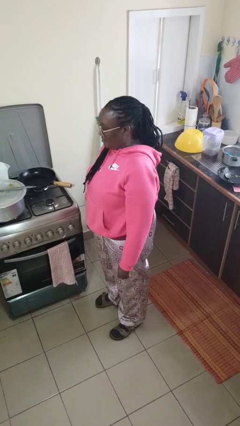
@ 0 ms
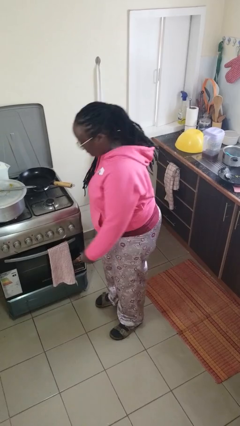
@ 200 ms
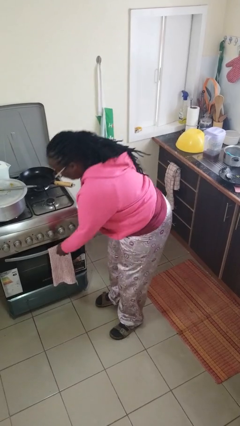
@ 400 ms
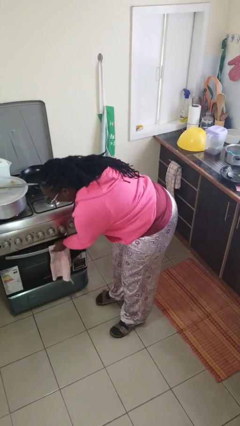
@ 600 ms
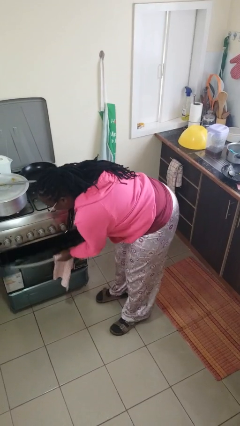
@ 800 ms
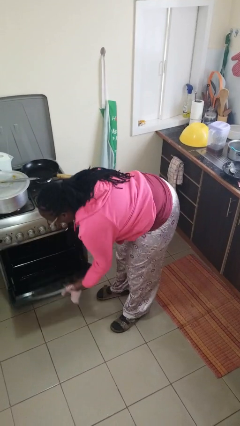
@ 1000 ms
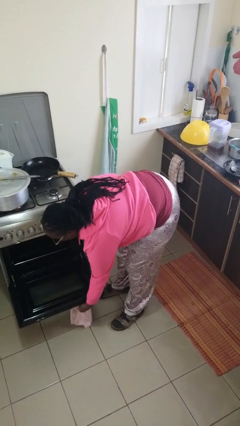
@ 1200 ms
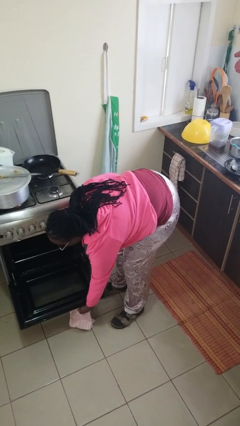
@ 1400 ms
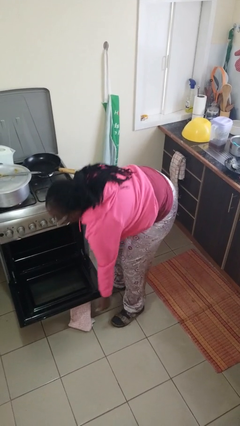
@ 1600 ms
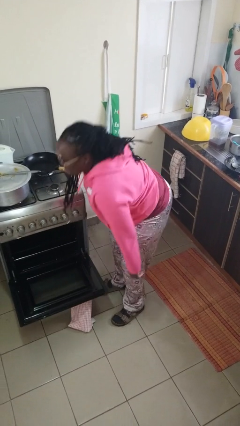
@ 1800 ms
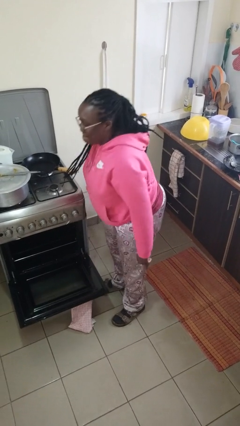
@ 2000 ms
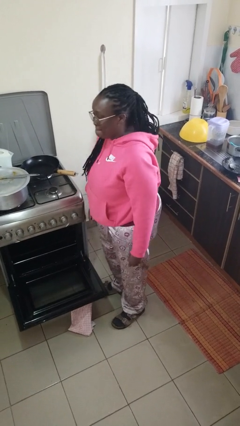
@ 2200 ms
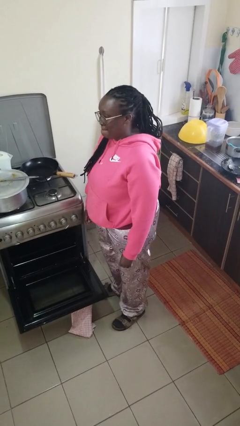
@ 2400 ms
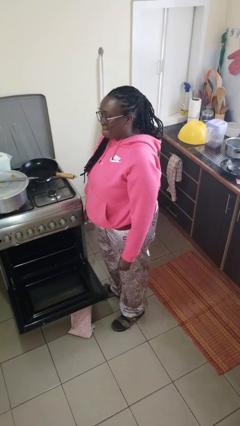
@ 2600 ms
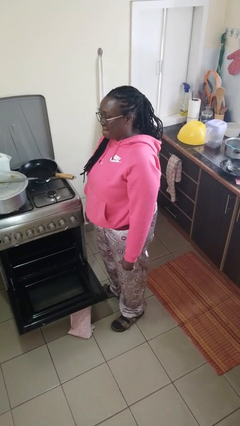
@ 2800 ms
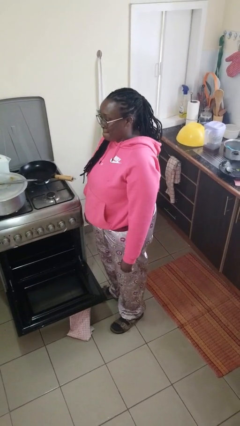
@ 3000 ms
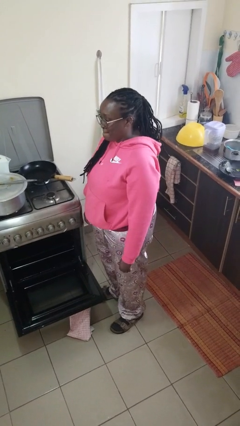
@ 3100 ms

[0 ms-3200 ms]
person opens oven door

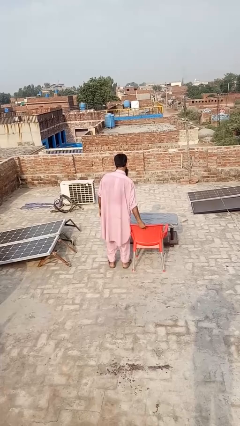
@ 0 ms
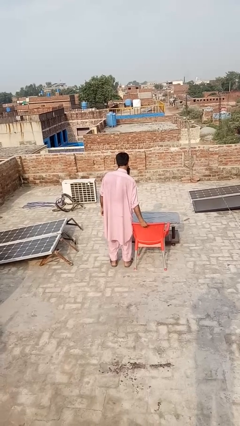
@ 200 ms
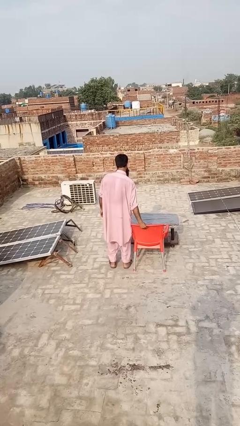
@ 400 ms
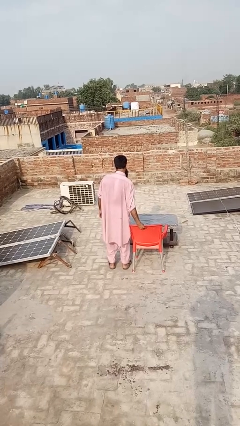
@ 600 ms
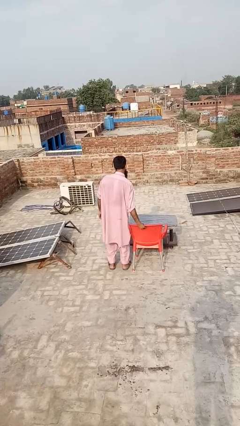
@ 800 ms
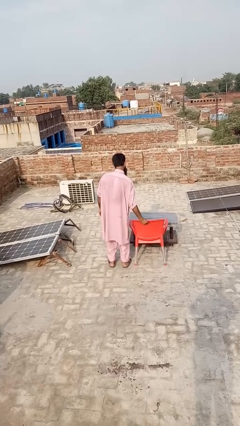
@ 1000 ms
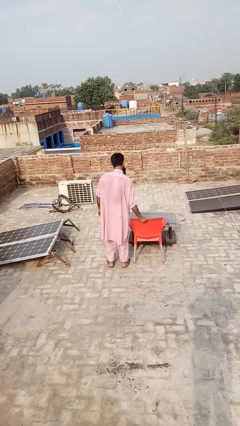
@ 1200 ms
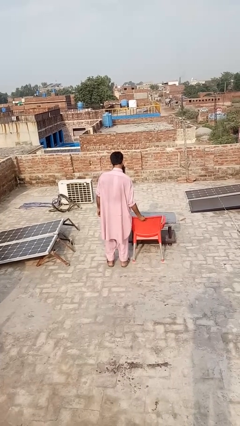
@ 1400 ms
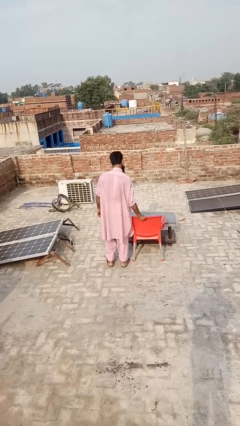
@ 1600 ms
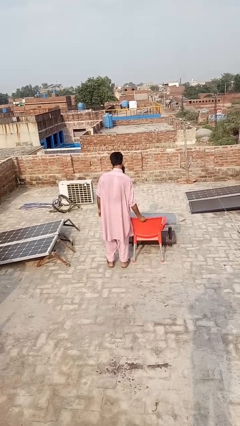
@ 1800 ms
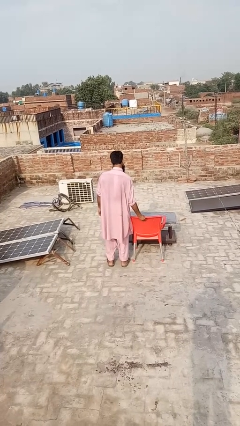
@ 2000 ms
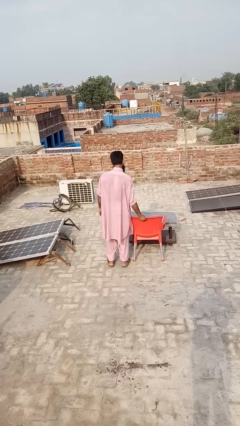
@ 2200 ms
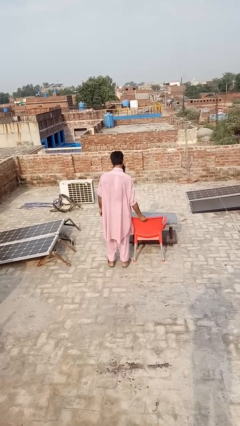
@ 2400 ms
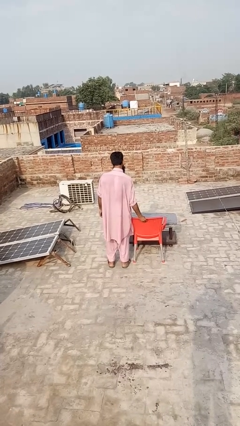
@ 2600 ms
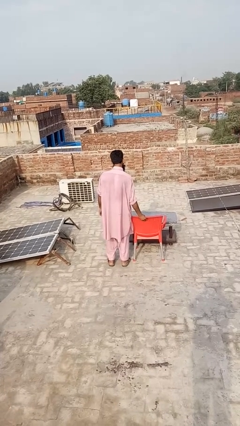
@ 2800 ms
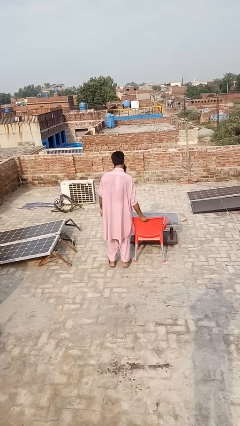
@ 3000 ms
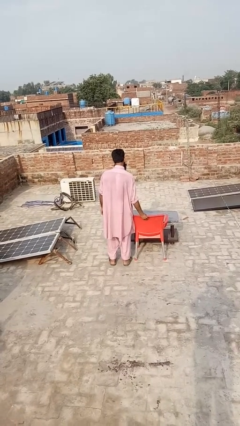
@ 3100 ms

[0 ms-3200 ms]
person pushes in chair

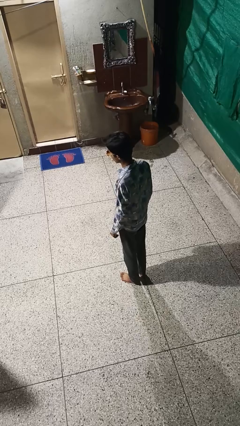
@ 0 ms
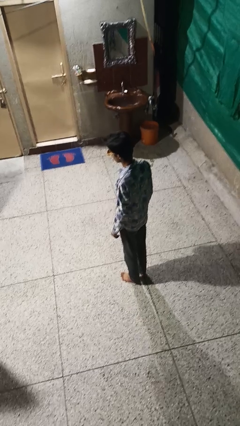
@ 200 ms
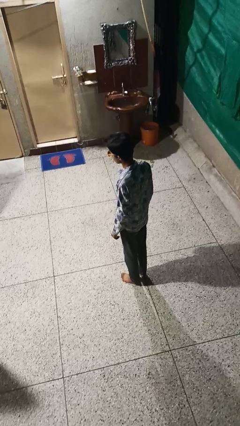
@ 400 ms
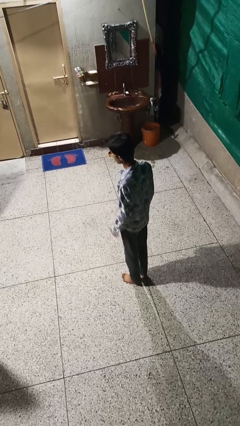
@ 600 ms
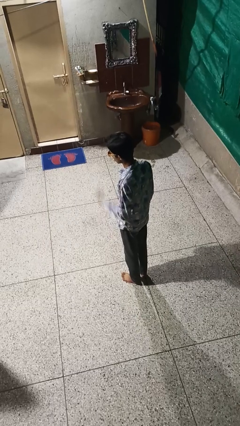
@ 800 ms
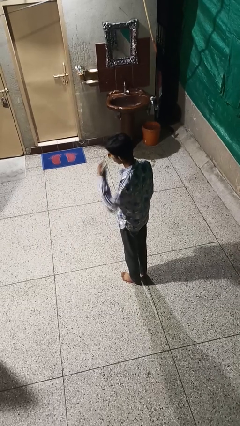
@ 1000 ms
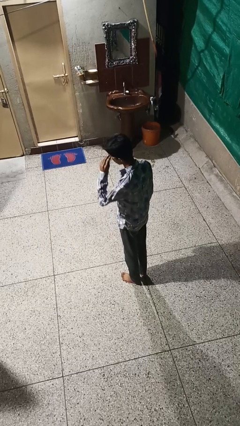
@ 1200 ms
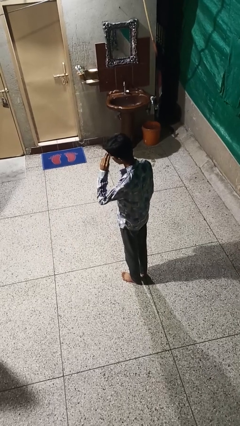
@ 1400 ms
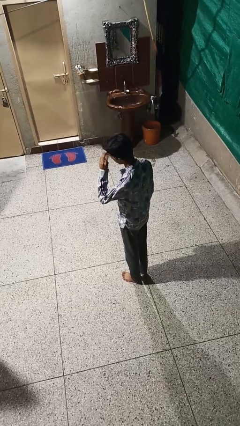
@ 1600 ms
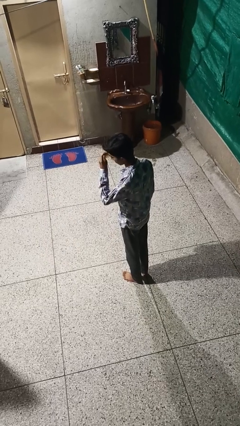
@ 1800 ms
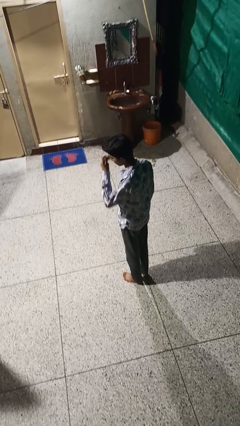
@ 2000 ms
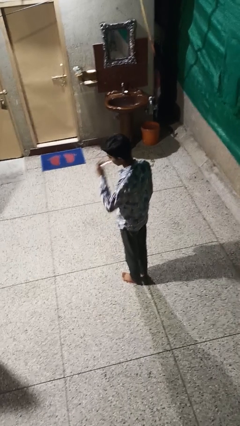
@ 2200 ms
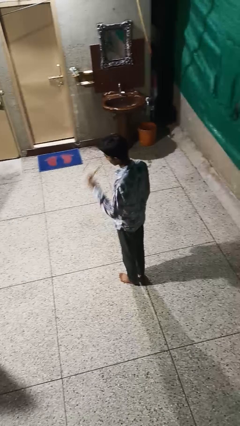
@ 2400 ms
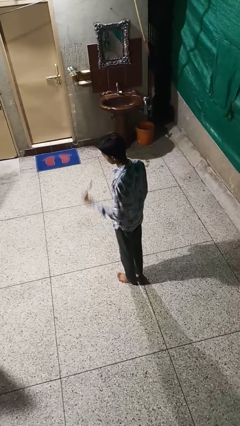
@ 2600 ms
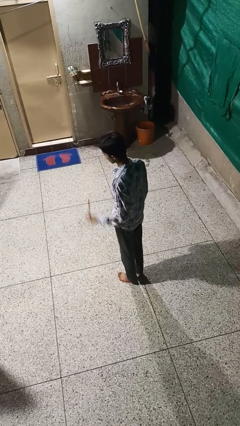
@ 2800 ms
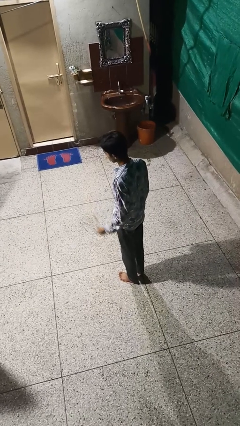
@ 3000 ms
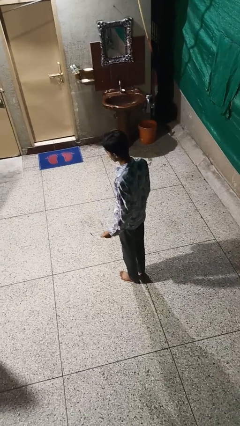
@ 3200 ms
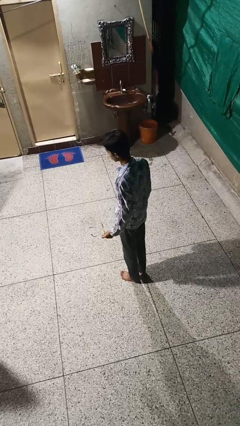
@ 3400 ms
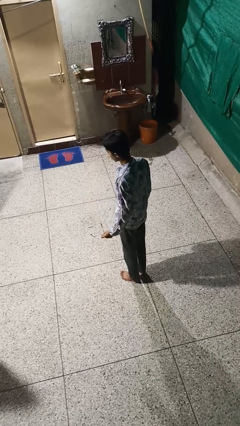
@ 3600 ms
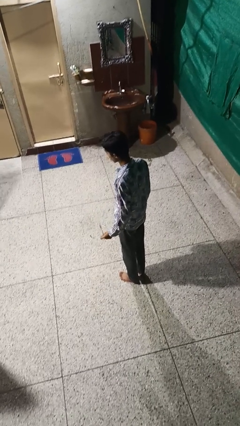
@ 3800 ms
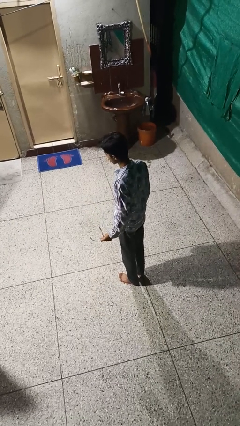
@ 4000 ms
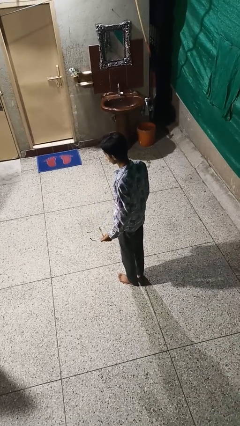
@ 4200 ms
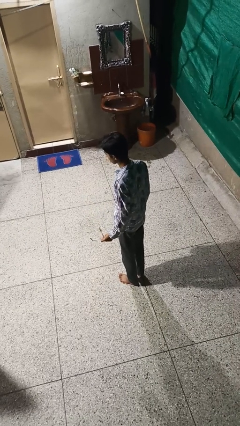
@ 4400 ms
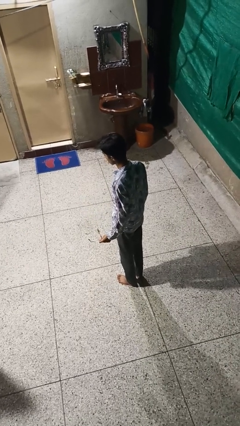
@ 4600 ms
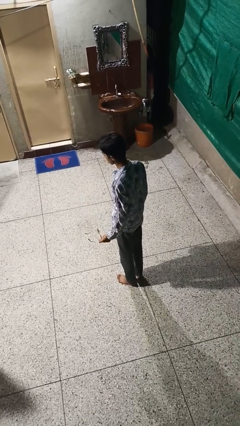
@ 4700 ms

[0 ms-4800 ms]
person takes off sunglasses

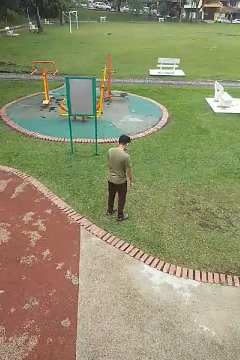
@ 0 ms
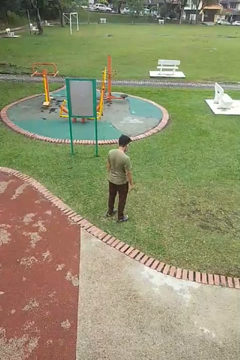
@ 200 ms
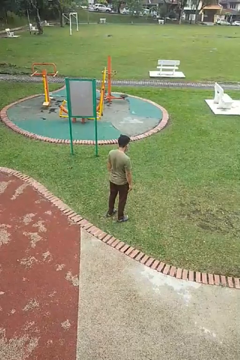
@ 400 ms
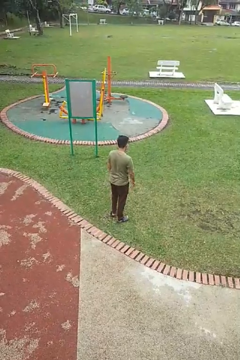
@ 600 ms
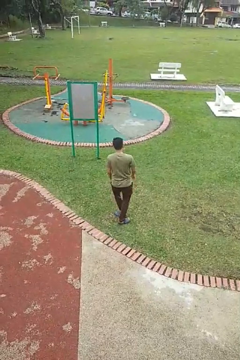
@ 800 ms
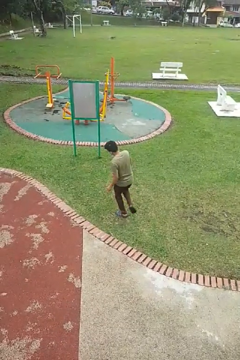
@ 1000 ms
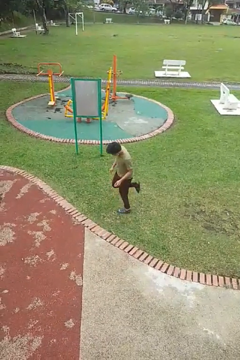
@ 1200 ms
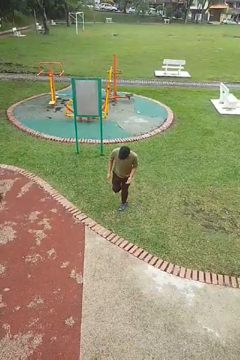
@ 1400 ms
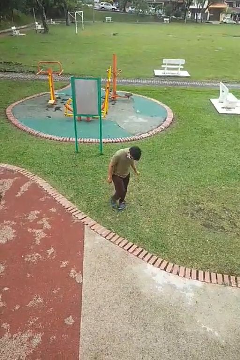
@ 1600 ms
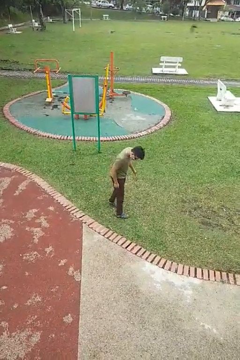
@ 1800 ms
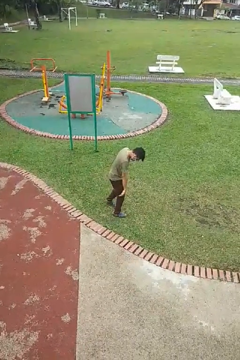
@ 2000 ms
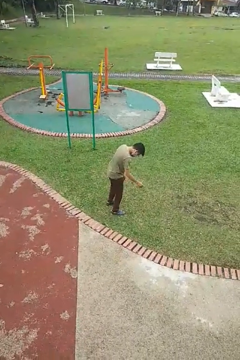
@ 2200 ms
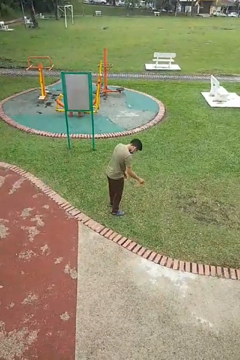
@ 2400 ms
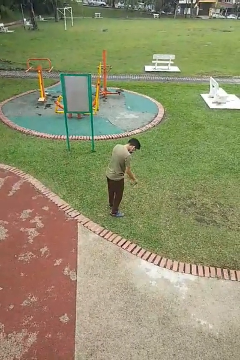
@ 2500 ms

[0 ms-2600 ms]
person twirls

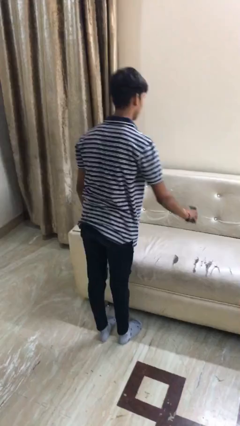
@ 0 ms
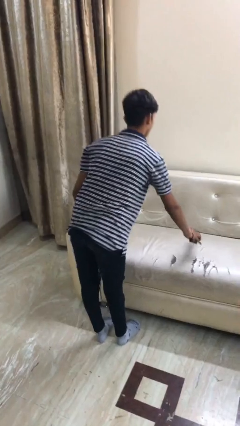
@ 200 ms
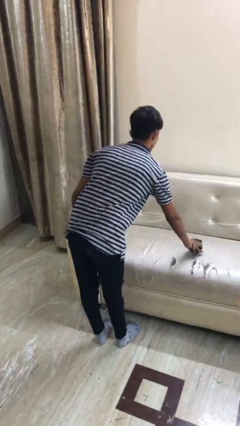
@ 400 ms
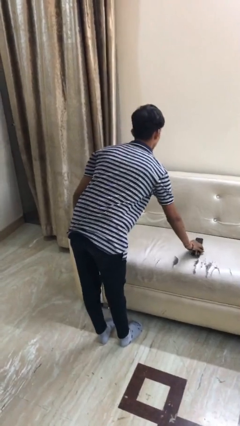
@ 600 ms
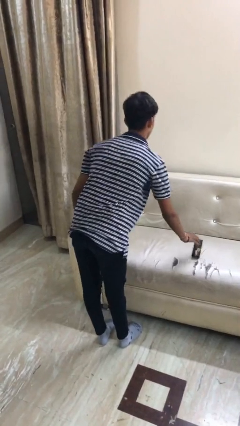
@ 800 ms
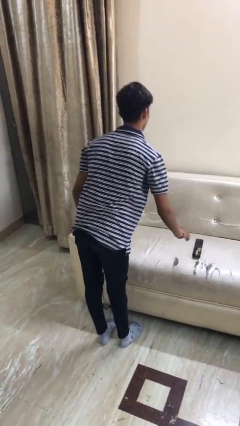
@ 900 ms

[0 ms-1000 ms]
person puts down object on bed

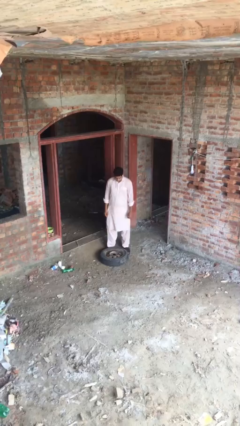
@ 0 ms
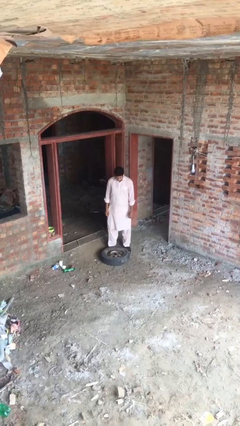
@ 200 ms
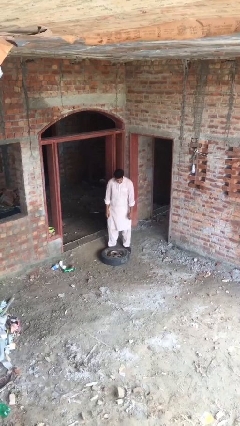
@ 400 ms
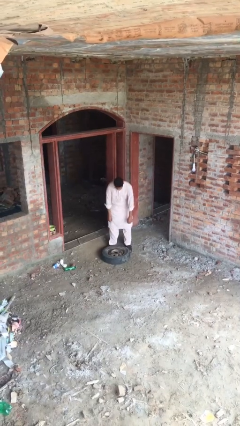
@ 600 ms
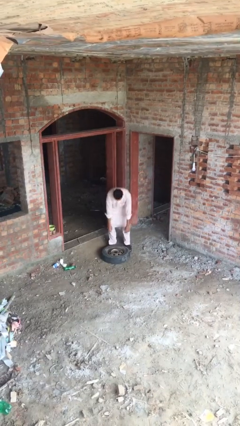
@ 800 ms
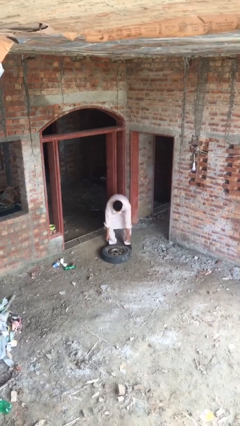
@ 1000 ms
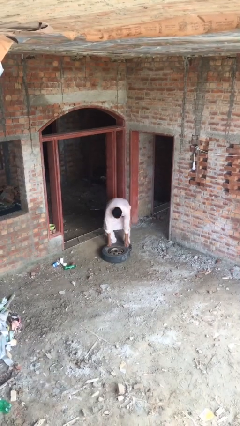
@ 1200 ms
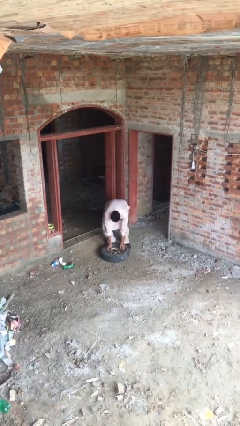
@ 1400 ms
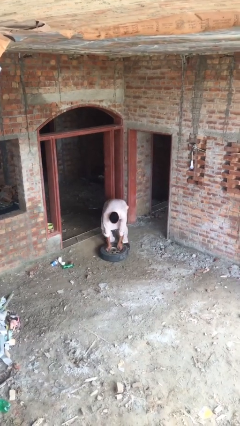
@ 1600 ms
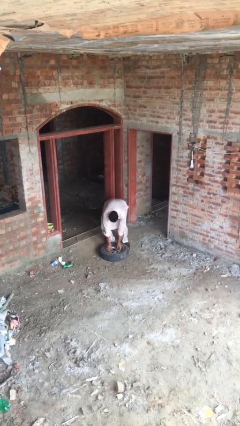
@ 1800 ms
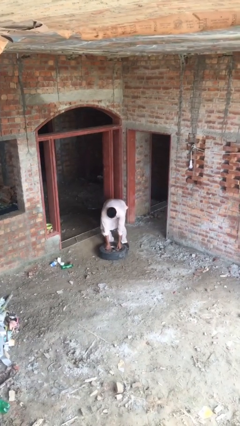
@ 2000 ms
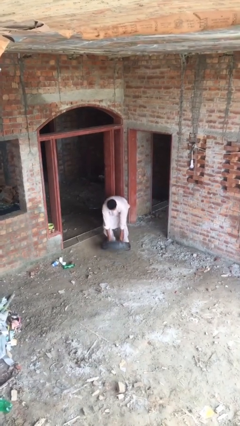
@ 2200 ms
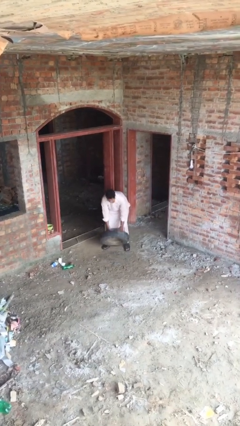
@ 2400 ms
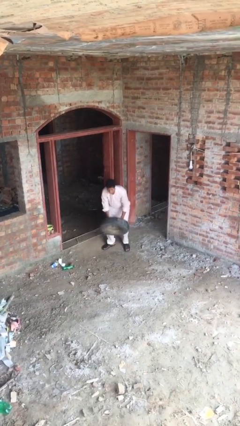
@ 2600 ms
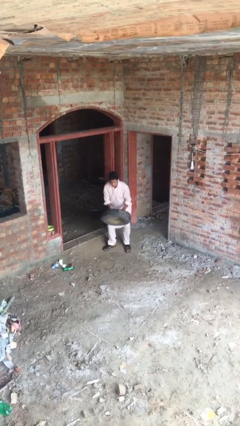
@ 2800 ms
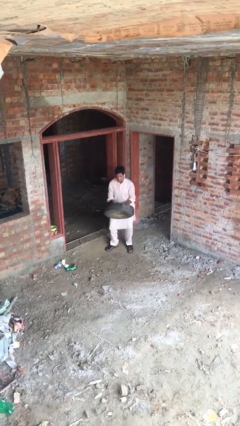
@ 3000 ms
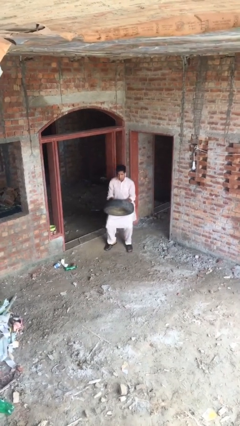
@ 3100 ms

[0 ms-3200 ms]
person picks up object from floor
